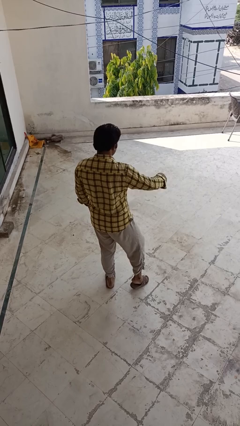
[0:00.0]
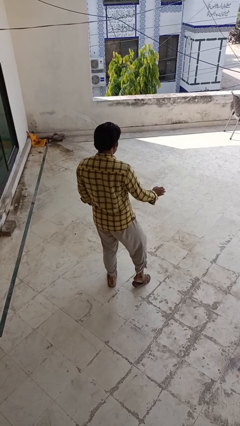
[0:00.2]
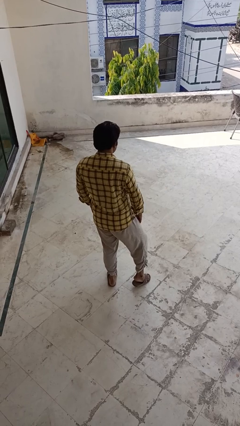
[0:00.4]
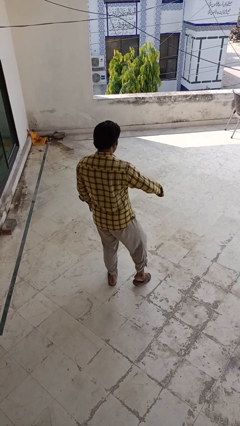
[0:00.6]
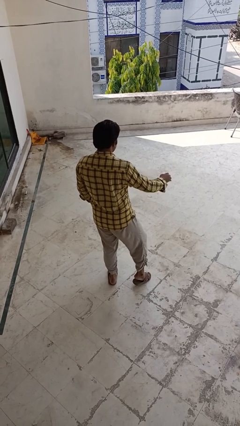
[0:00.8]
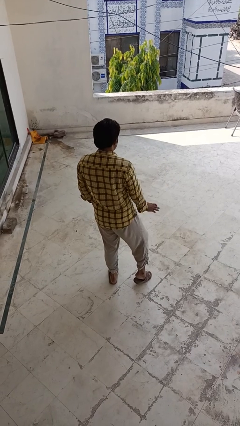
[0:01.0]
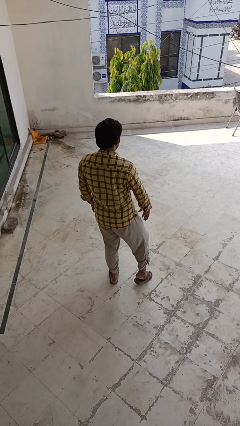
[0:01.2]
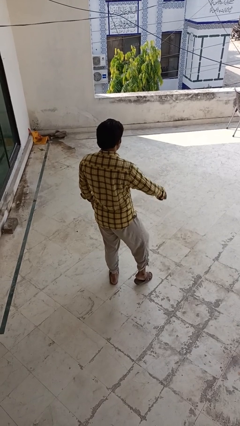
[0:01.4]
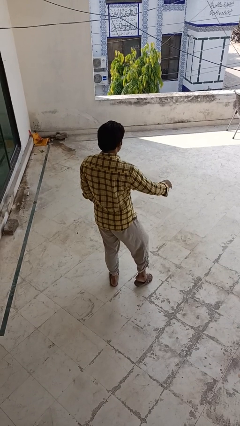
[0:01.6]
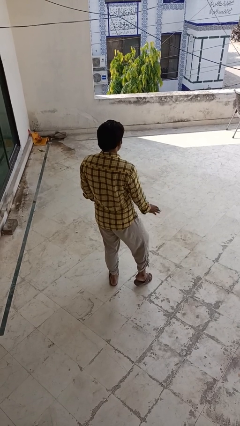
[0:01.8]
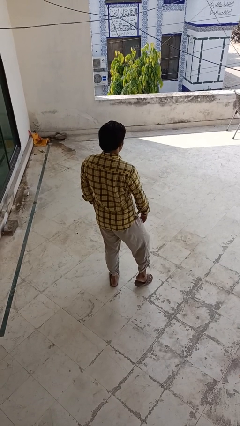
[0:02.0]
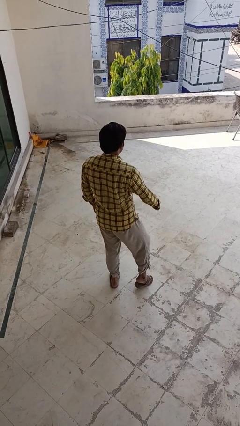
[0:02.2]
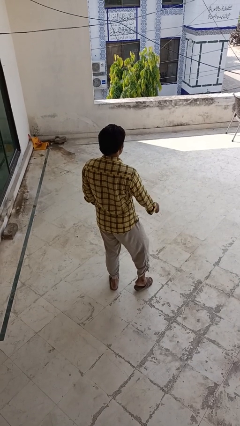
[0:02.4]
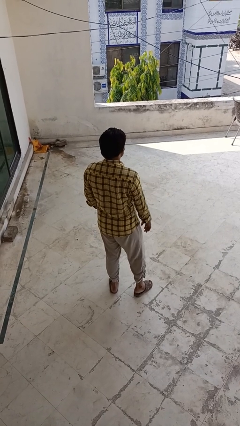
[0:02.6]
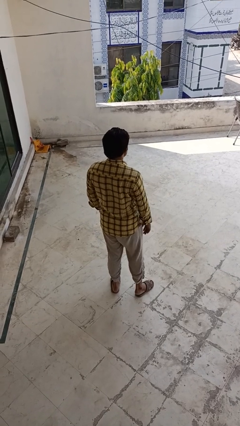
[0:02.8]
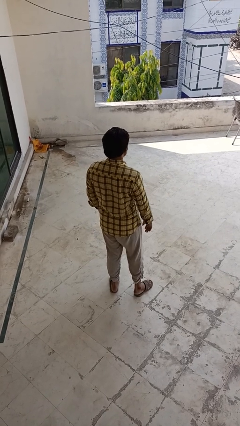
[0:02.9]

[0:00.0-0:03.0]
person slaps hands on thighs

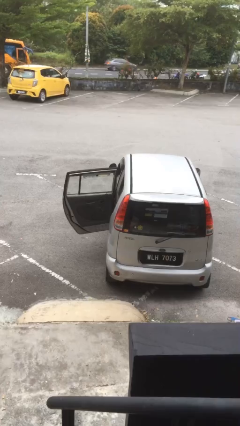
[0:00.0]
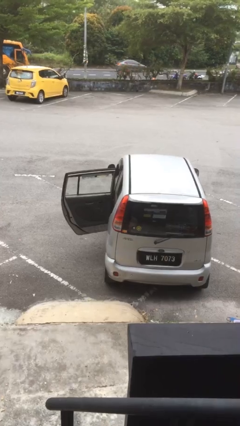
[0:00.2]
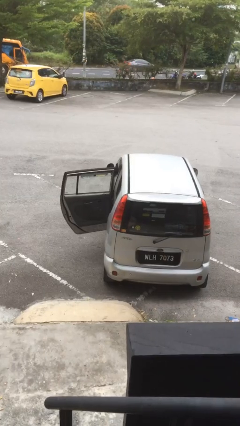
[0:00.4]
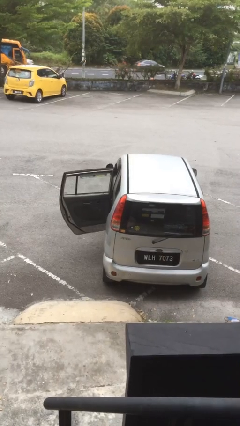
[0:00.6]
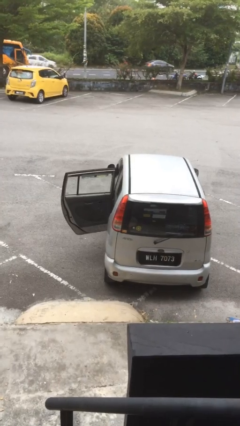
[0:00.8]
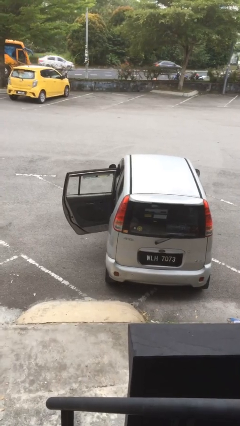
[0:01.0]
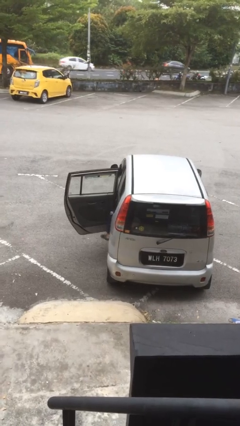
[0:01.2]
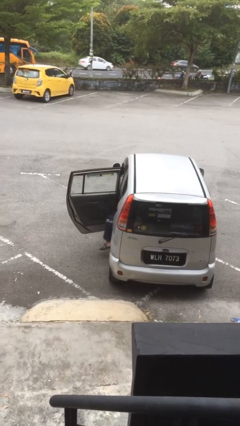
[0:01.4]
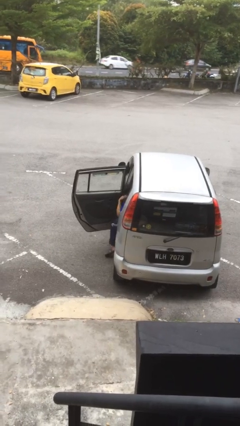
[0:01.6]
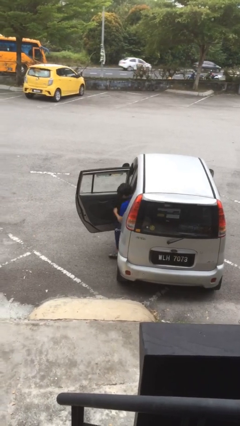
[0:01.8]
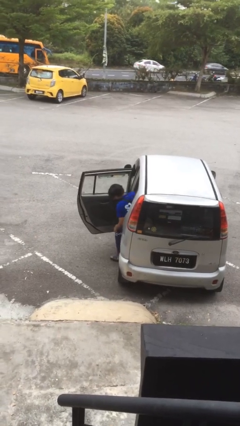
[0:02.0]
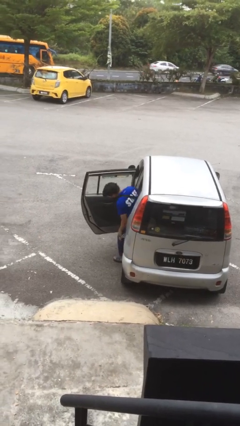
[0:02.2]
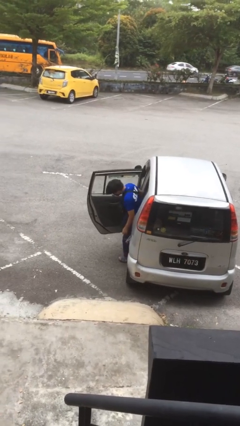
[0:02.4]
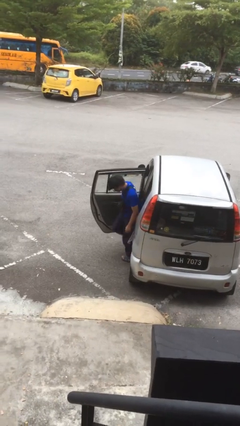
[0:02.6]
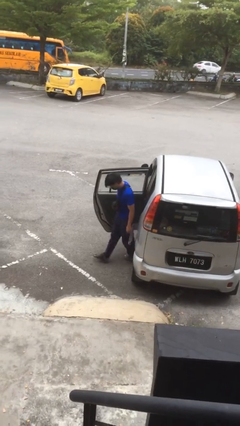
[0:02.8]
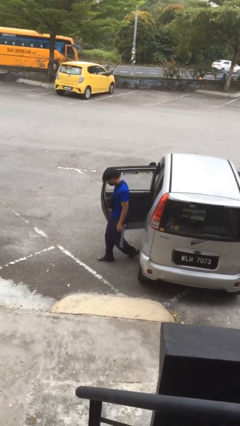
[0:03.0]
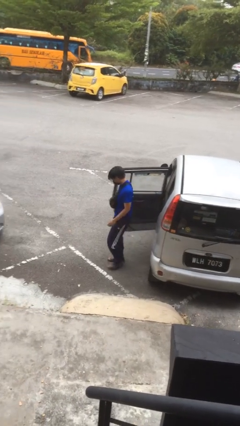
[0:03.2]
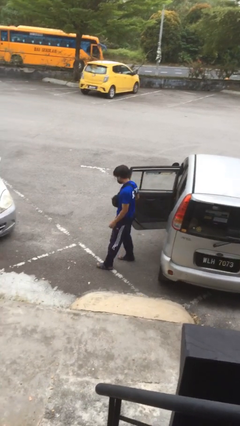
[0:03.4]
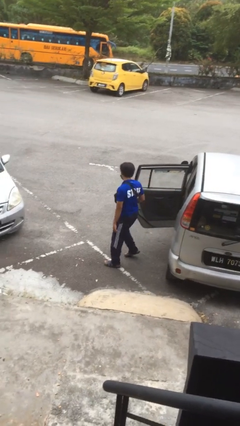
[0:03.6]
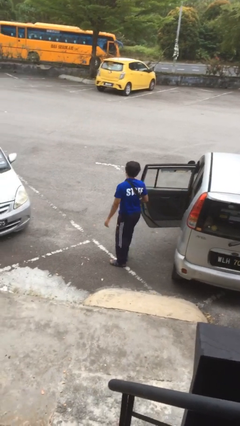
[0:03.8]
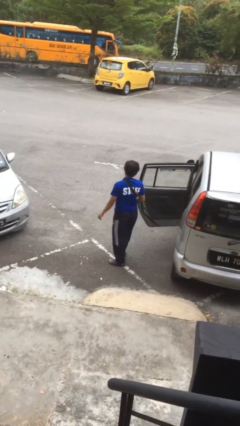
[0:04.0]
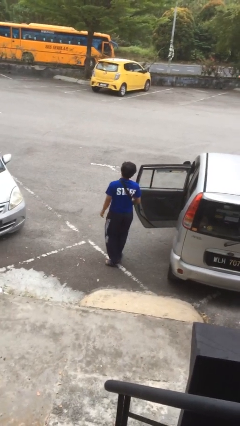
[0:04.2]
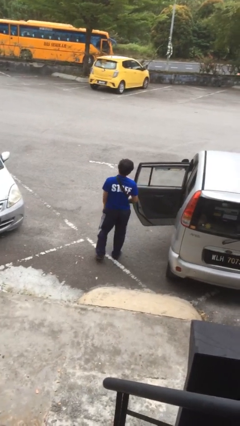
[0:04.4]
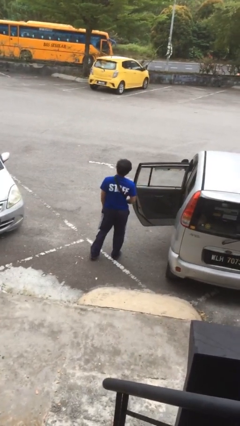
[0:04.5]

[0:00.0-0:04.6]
person exits car

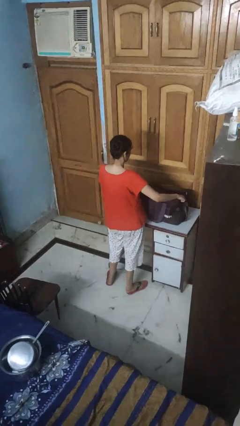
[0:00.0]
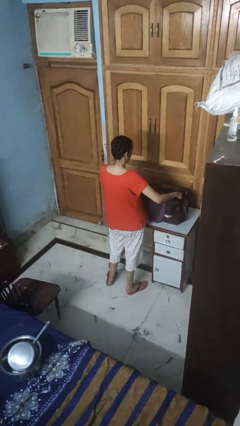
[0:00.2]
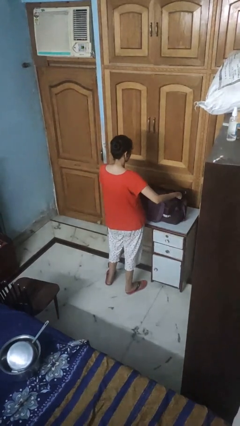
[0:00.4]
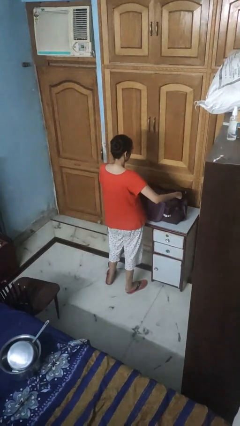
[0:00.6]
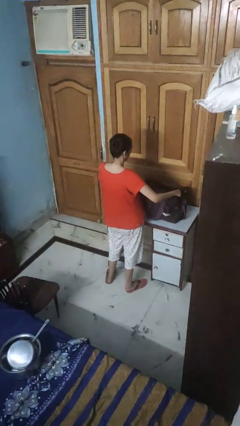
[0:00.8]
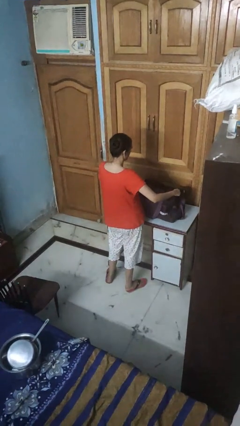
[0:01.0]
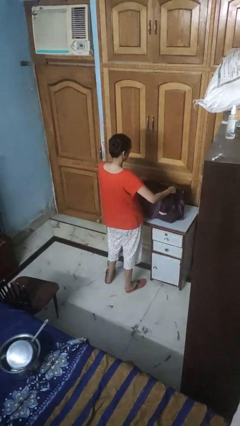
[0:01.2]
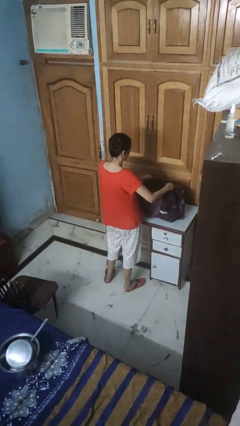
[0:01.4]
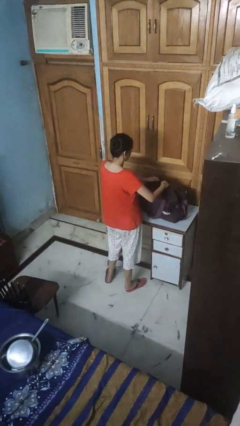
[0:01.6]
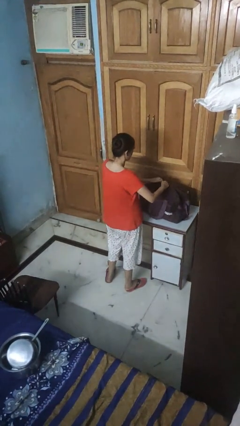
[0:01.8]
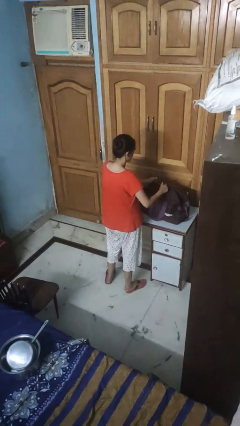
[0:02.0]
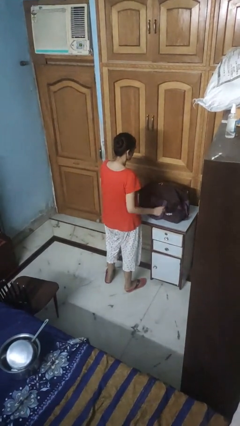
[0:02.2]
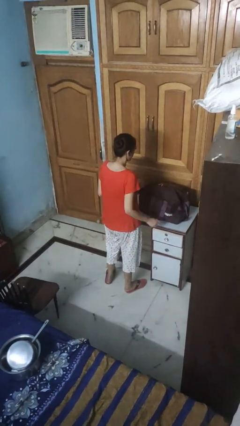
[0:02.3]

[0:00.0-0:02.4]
person closes suitcase

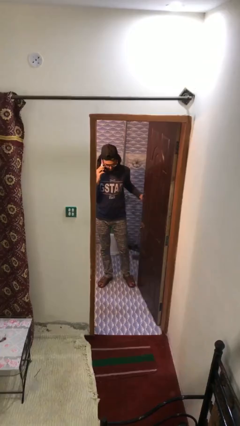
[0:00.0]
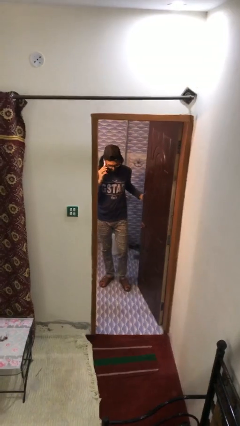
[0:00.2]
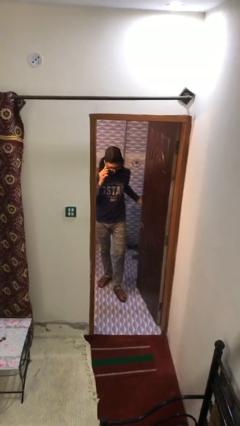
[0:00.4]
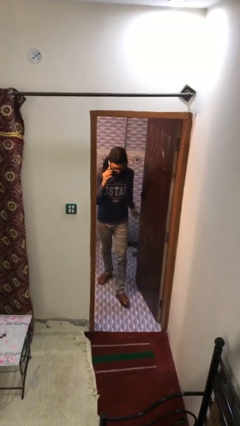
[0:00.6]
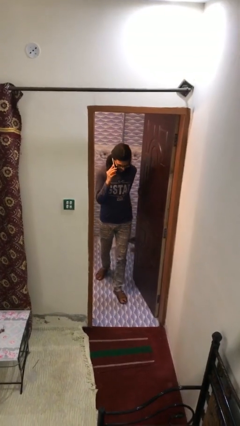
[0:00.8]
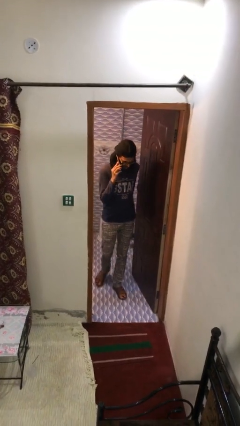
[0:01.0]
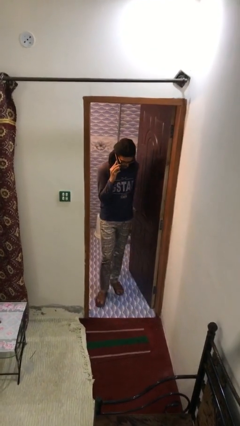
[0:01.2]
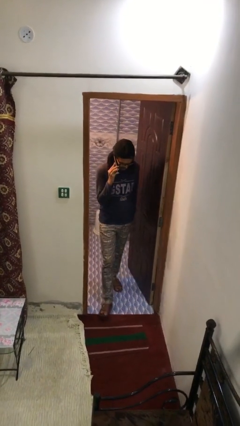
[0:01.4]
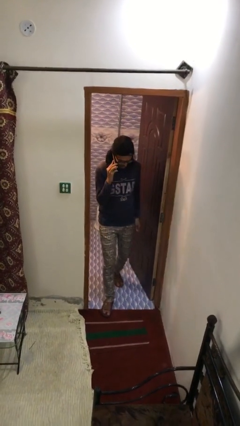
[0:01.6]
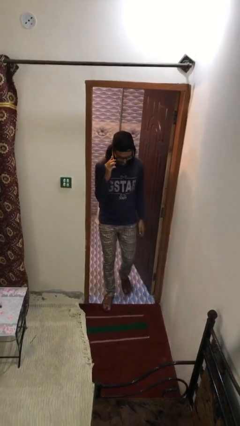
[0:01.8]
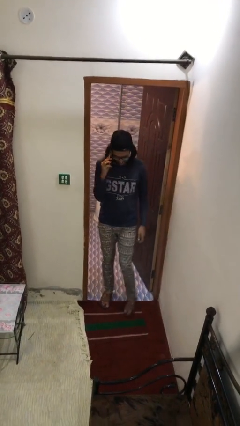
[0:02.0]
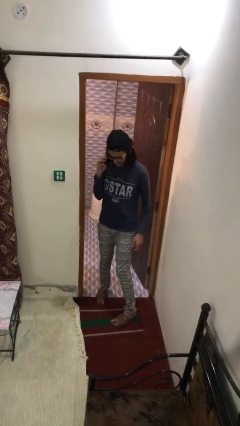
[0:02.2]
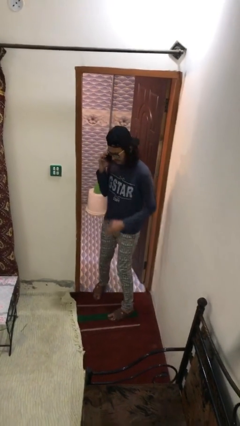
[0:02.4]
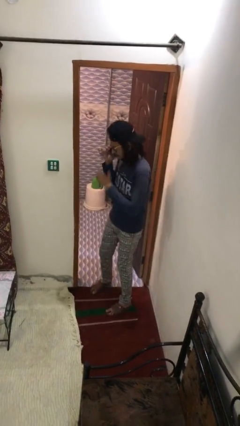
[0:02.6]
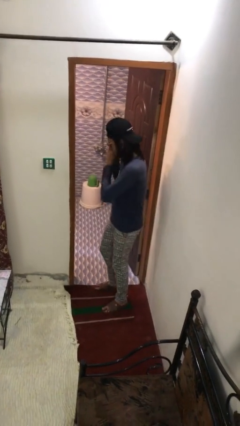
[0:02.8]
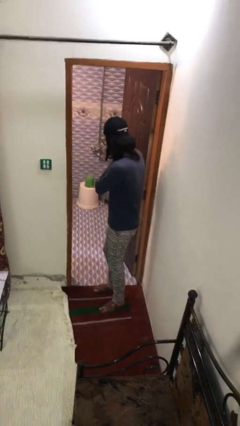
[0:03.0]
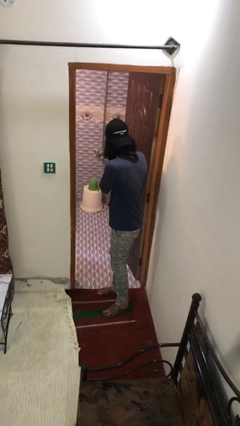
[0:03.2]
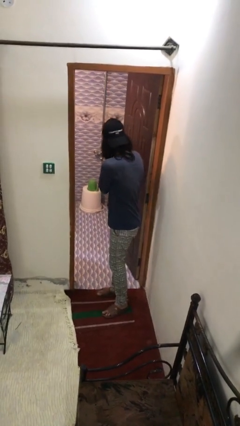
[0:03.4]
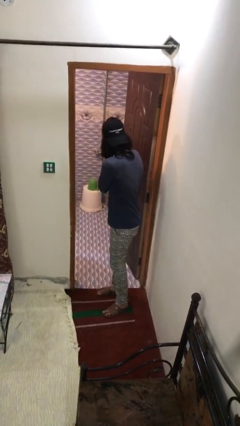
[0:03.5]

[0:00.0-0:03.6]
person enters scene through structure

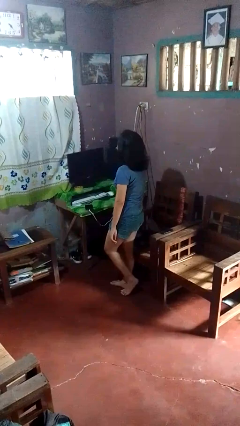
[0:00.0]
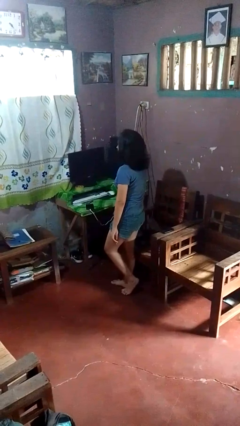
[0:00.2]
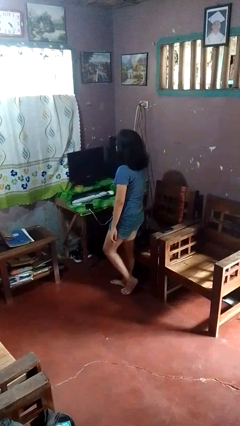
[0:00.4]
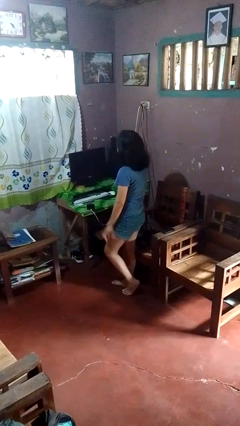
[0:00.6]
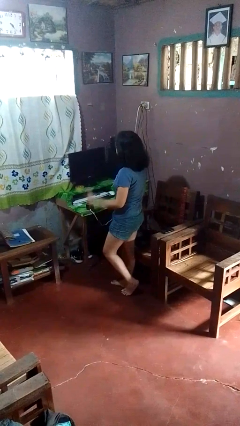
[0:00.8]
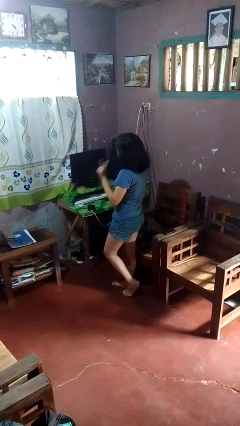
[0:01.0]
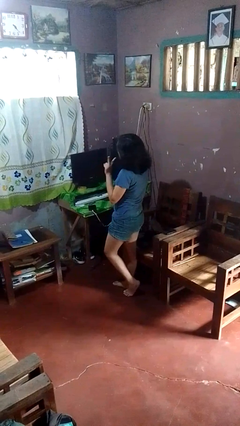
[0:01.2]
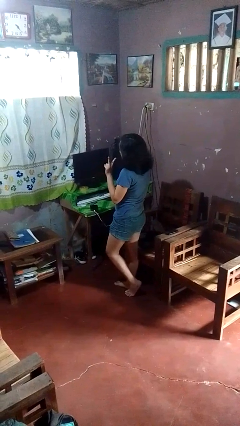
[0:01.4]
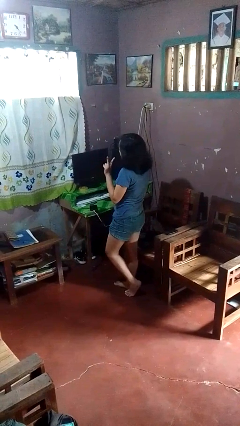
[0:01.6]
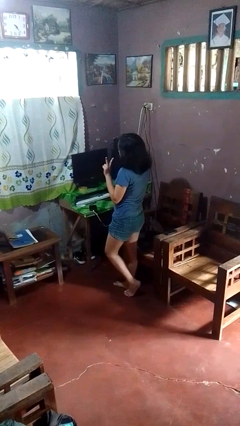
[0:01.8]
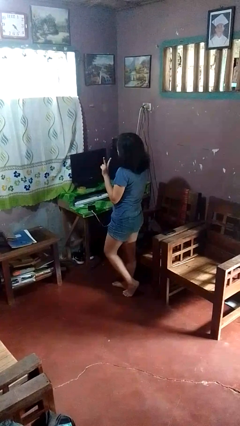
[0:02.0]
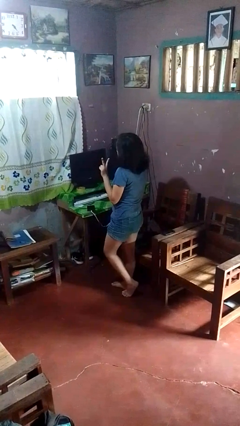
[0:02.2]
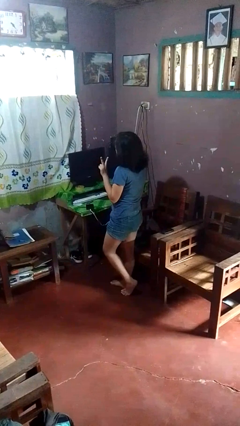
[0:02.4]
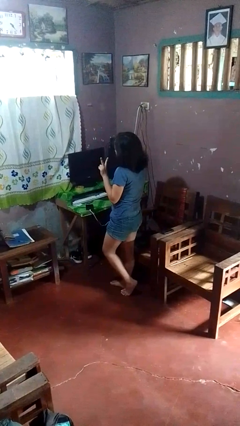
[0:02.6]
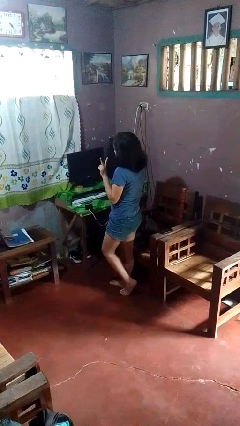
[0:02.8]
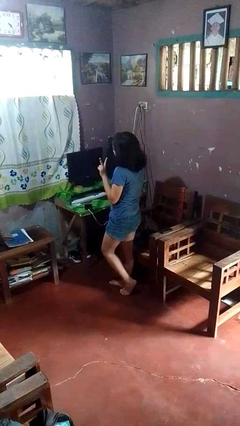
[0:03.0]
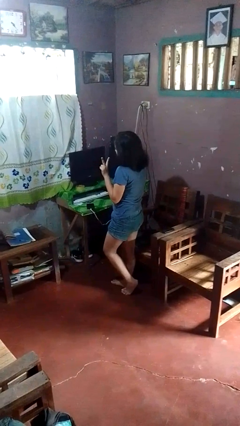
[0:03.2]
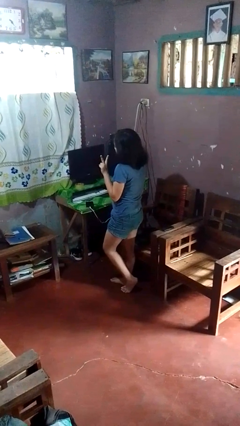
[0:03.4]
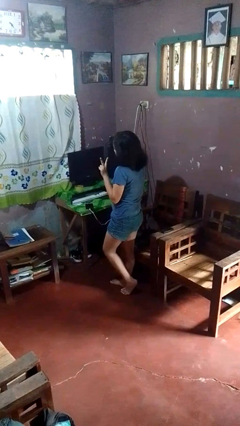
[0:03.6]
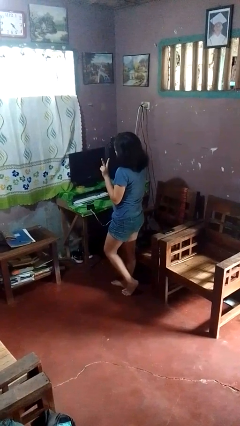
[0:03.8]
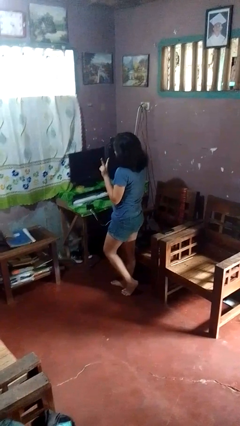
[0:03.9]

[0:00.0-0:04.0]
person gestures peace
